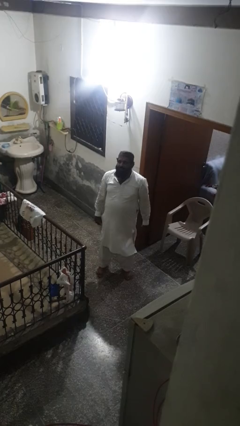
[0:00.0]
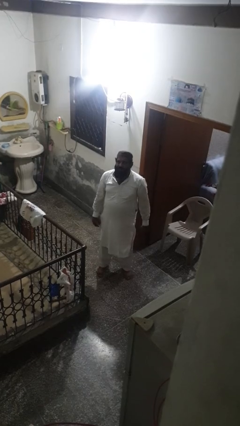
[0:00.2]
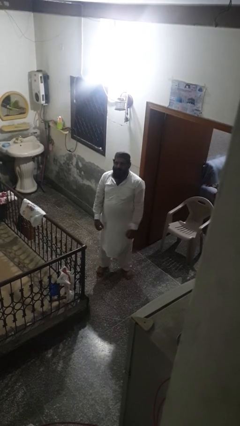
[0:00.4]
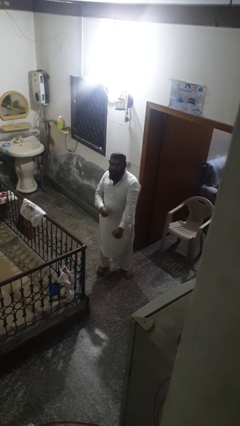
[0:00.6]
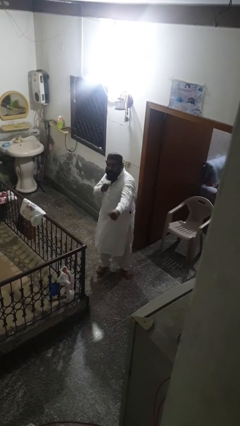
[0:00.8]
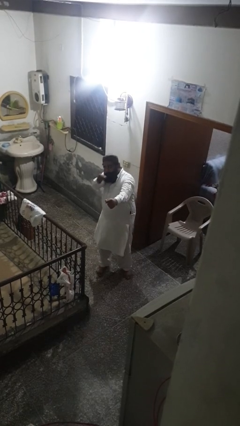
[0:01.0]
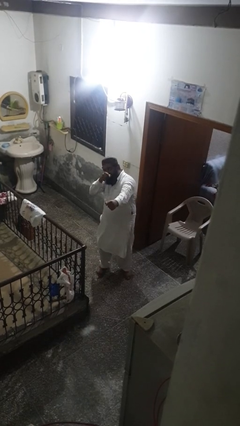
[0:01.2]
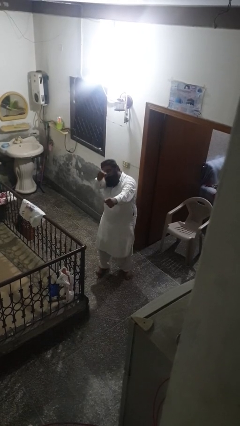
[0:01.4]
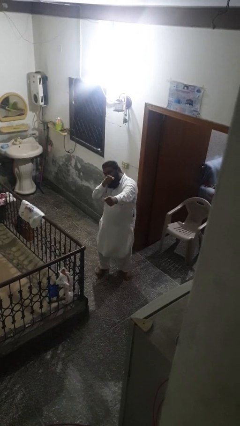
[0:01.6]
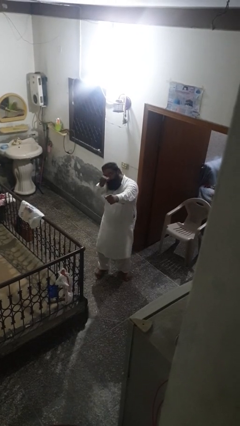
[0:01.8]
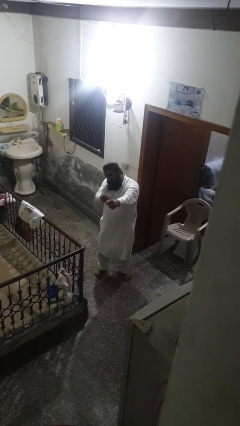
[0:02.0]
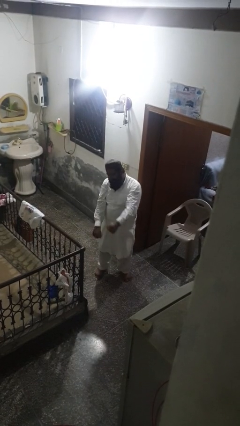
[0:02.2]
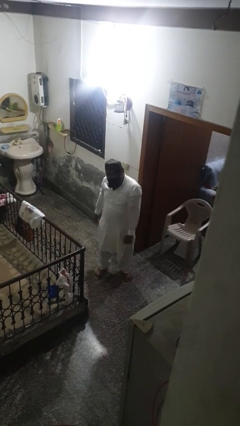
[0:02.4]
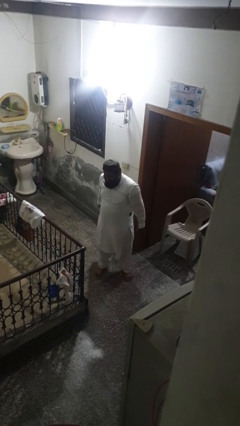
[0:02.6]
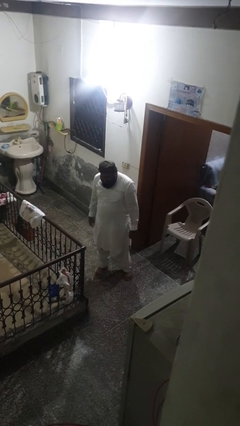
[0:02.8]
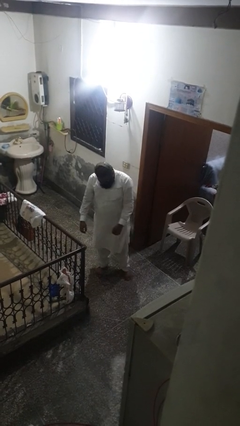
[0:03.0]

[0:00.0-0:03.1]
person punches

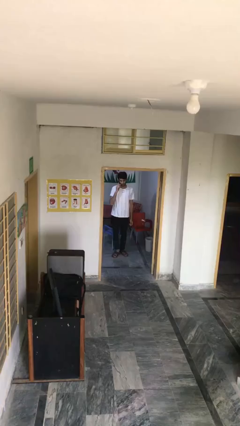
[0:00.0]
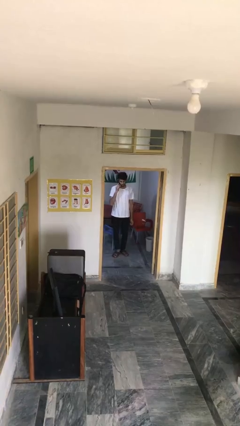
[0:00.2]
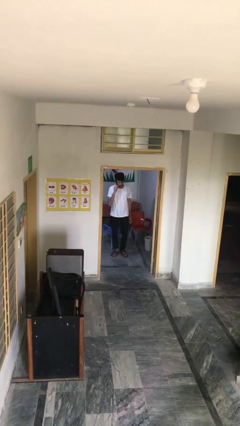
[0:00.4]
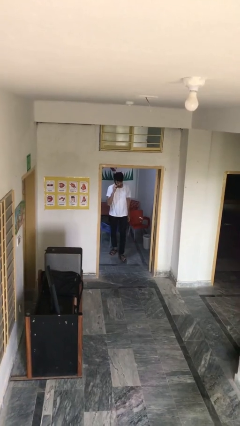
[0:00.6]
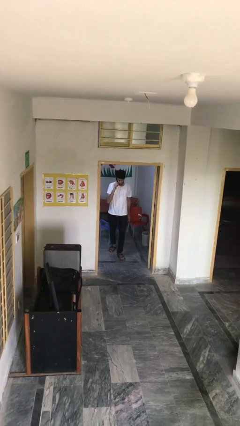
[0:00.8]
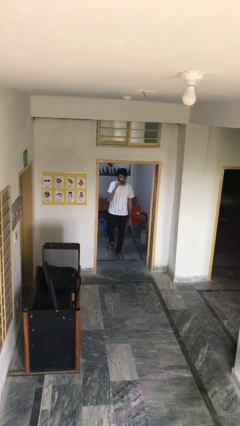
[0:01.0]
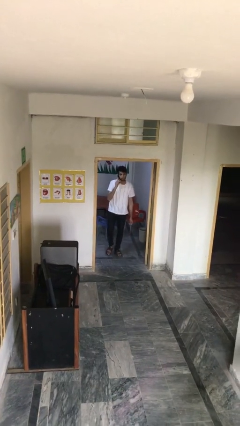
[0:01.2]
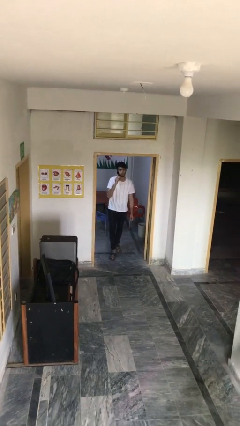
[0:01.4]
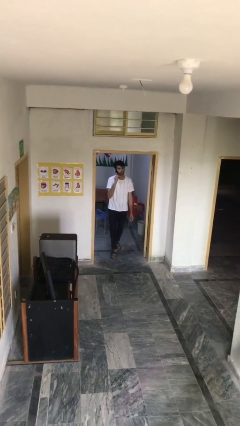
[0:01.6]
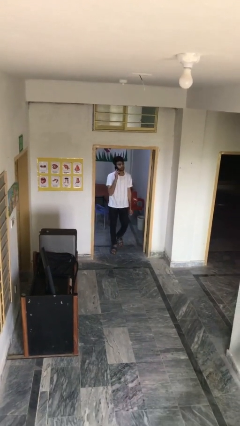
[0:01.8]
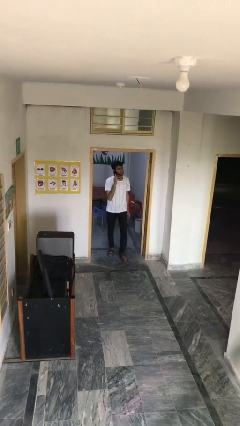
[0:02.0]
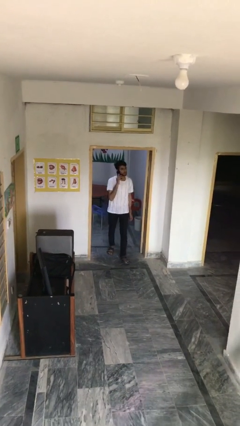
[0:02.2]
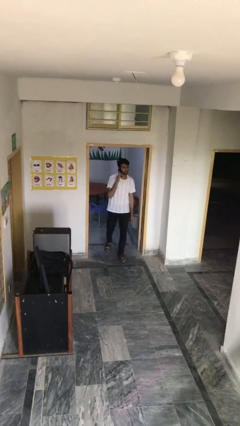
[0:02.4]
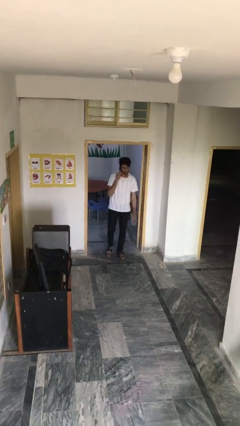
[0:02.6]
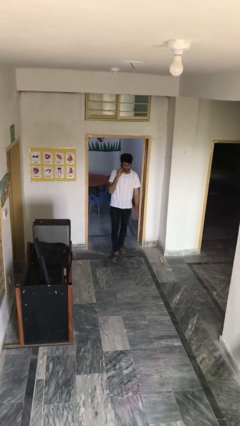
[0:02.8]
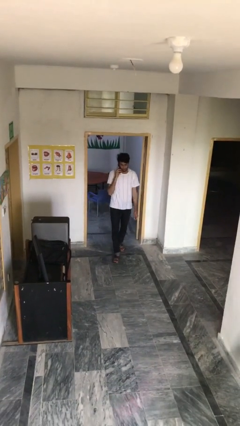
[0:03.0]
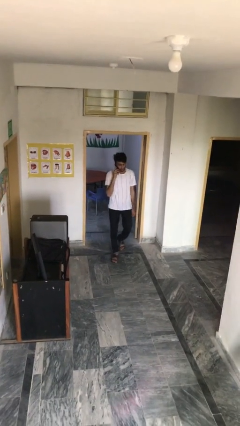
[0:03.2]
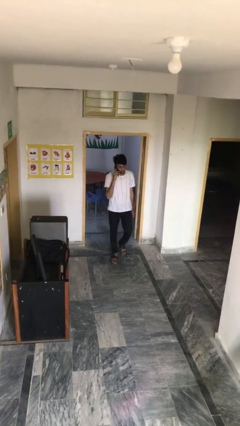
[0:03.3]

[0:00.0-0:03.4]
person enters scene through structure

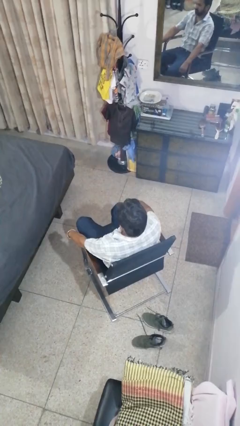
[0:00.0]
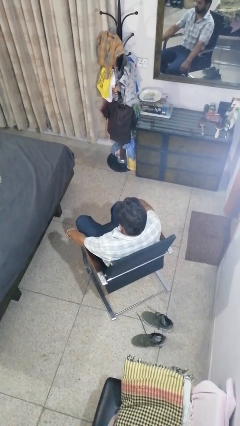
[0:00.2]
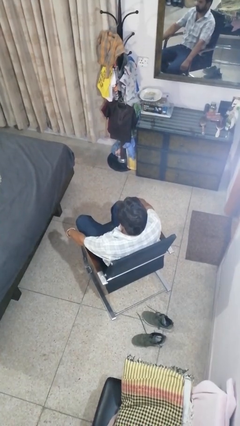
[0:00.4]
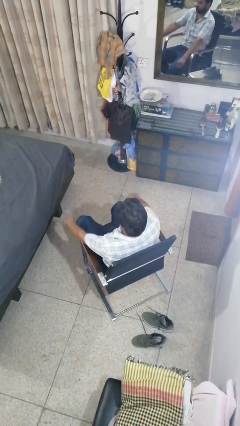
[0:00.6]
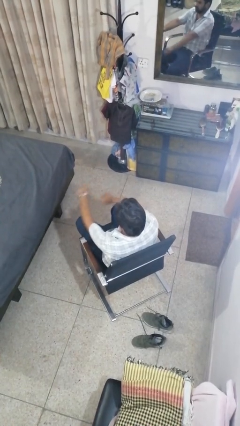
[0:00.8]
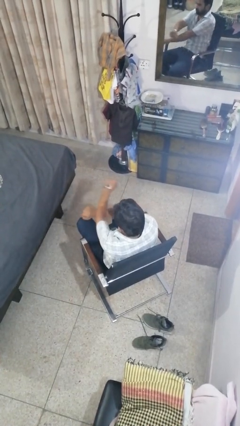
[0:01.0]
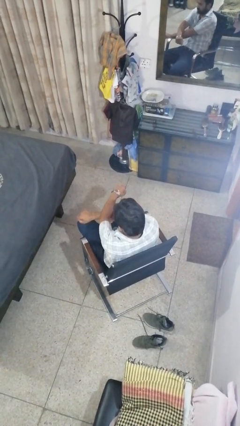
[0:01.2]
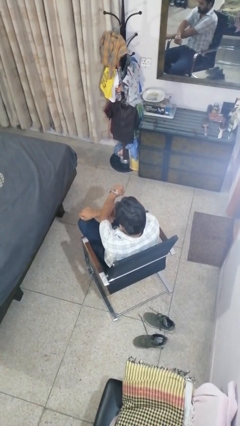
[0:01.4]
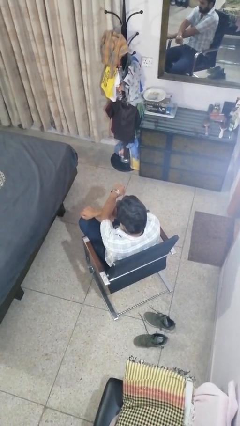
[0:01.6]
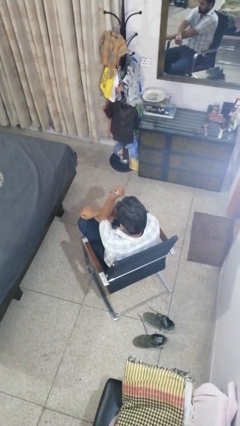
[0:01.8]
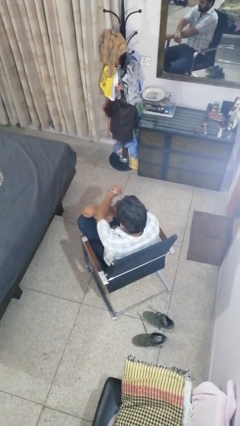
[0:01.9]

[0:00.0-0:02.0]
person gestures arms x

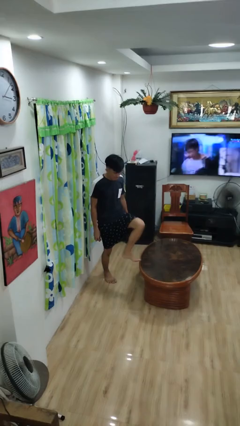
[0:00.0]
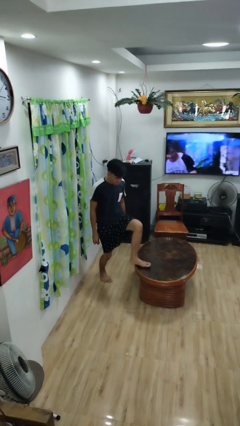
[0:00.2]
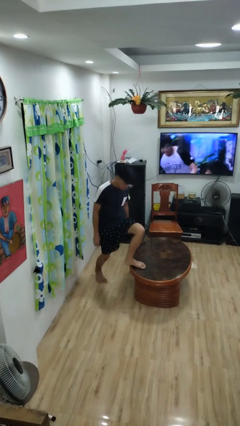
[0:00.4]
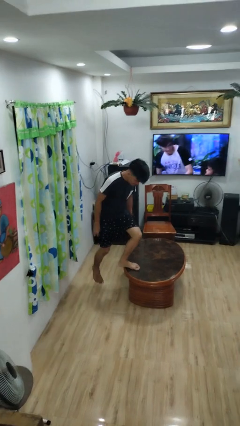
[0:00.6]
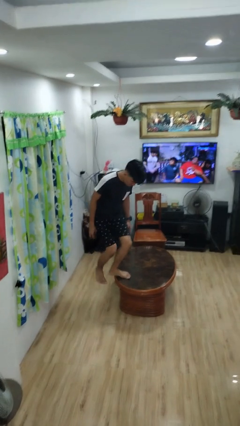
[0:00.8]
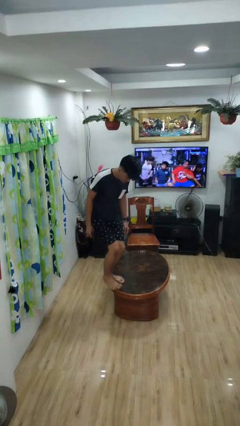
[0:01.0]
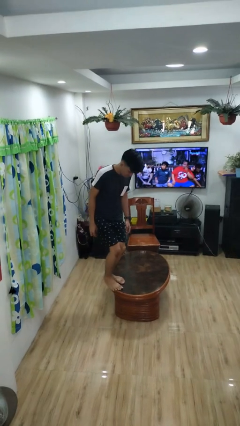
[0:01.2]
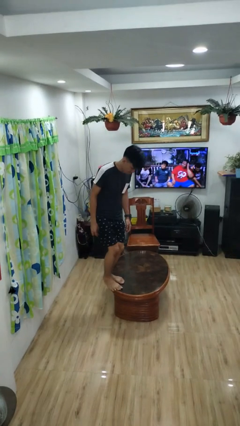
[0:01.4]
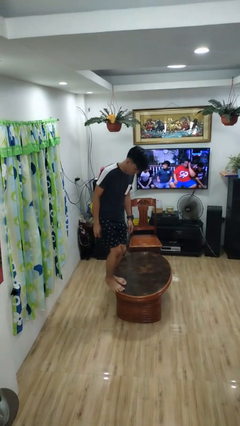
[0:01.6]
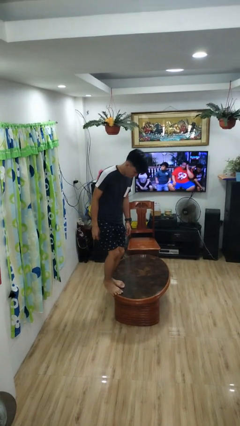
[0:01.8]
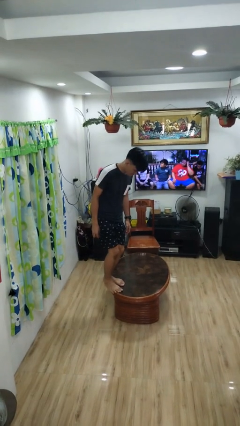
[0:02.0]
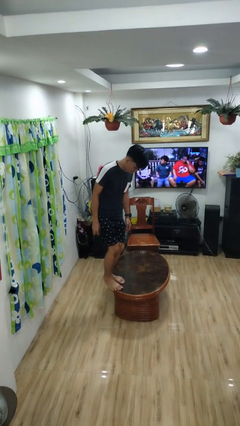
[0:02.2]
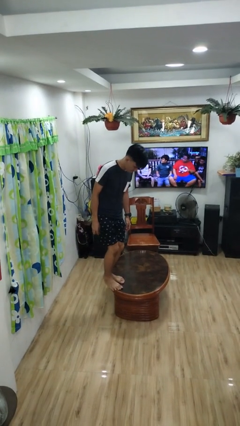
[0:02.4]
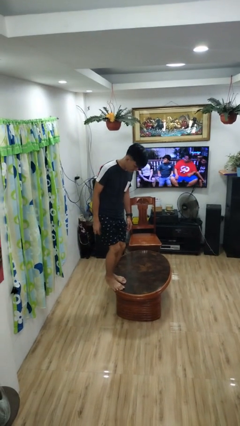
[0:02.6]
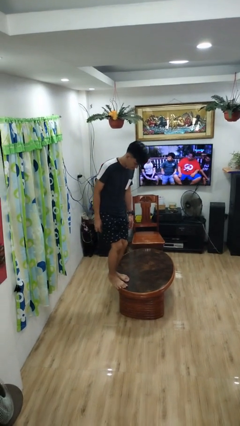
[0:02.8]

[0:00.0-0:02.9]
person climbs on table

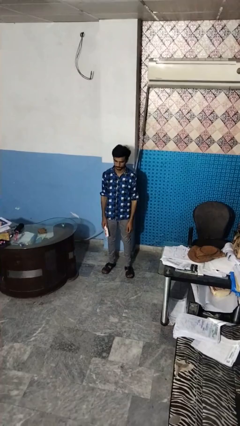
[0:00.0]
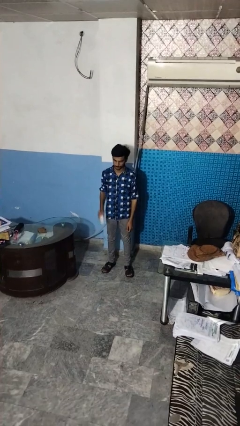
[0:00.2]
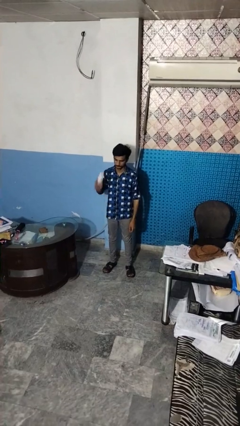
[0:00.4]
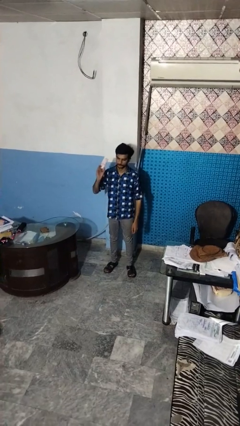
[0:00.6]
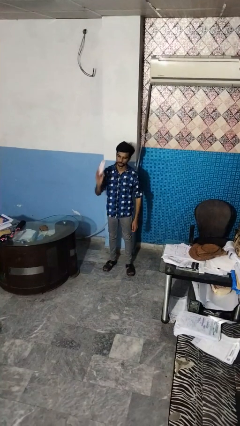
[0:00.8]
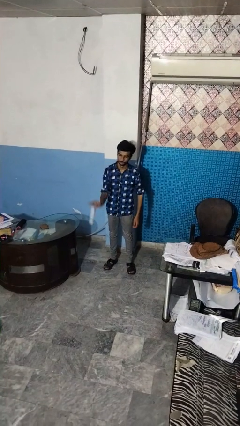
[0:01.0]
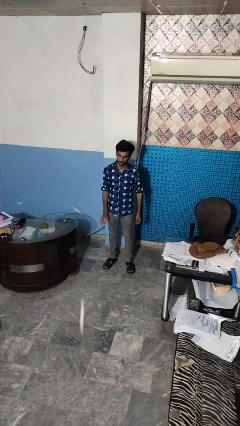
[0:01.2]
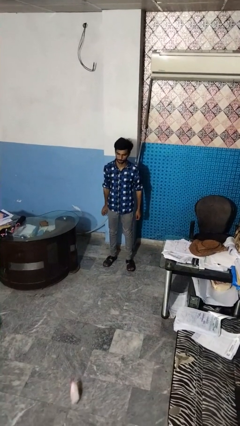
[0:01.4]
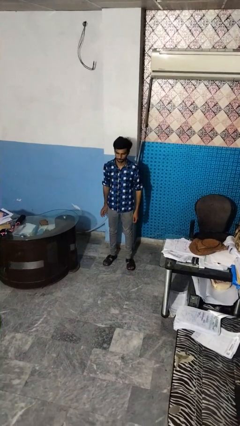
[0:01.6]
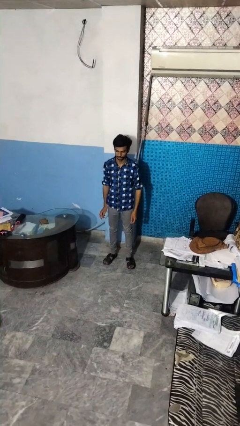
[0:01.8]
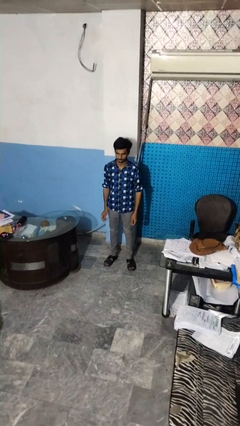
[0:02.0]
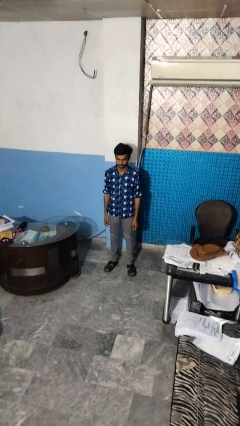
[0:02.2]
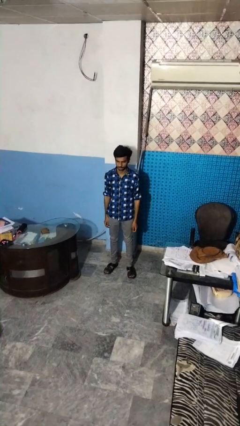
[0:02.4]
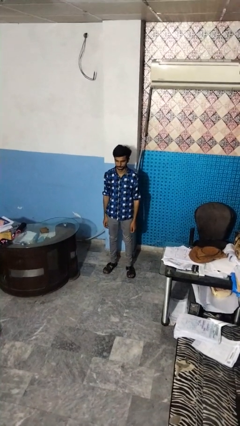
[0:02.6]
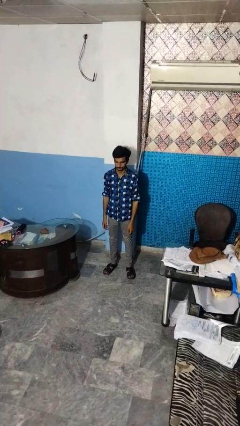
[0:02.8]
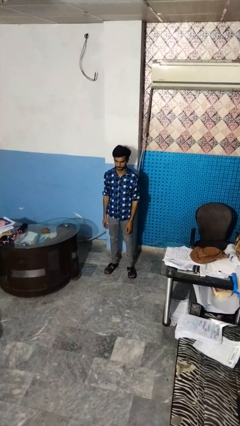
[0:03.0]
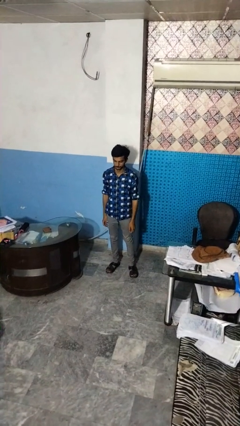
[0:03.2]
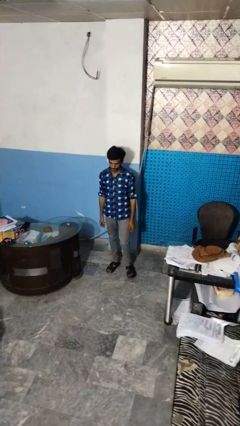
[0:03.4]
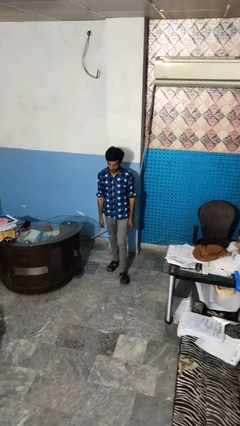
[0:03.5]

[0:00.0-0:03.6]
person throws object to ground

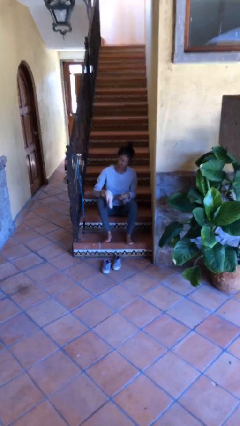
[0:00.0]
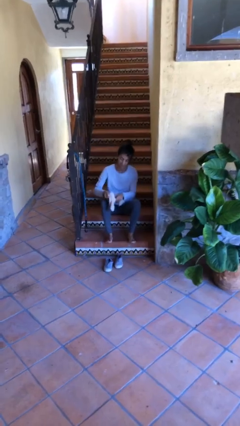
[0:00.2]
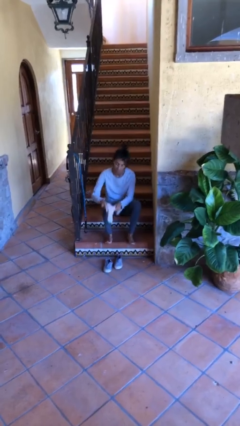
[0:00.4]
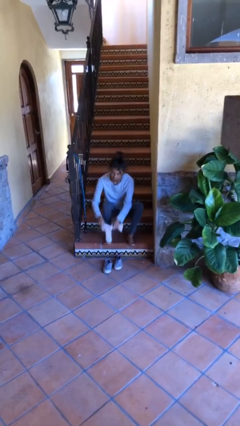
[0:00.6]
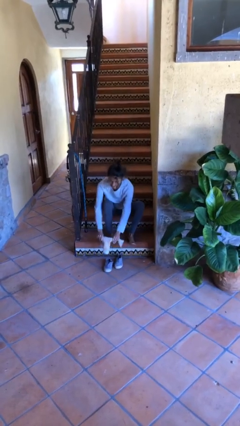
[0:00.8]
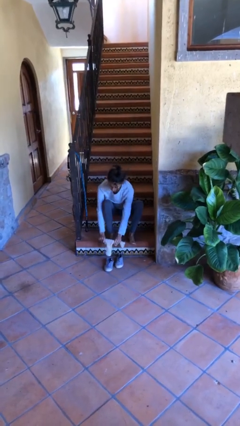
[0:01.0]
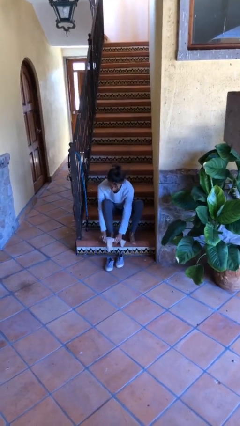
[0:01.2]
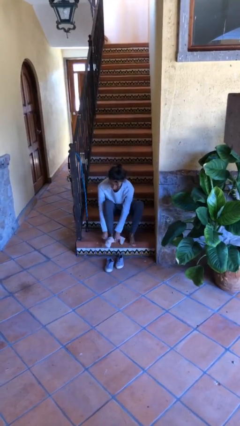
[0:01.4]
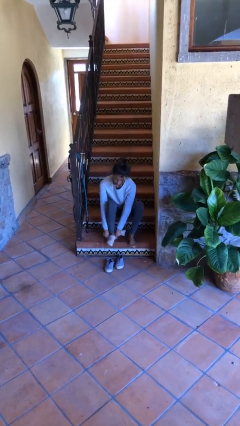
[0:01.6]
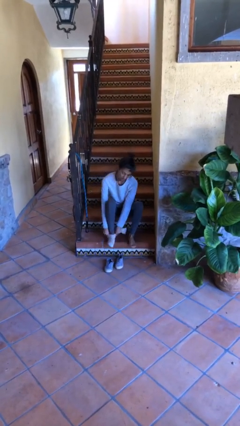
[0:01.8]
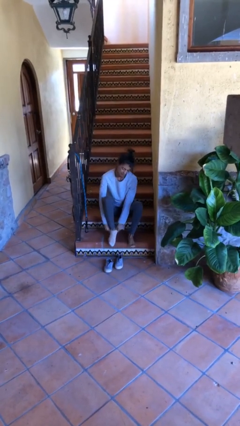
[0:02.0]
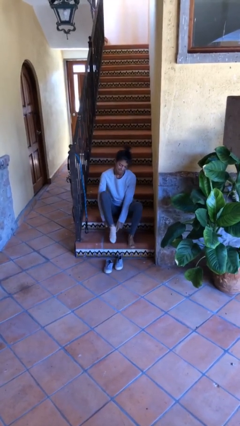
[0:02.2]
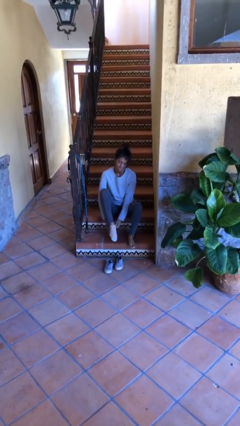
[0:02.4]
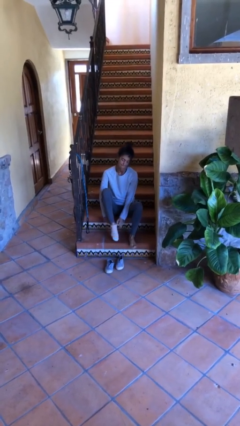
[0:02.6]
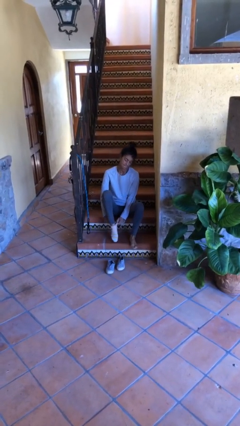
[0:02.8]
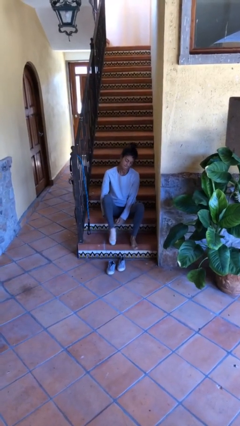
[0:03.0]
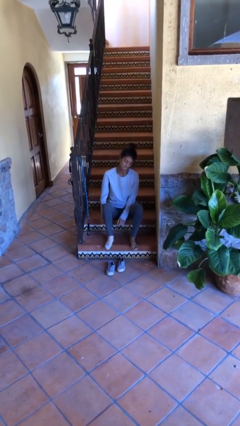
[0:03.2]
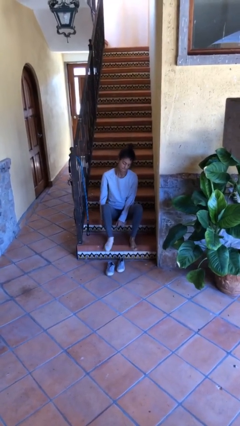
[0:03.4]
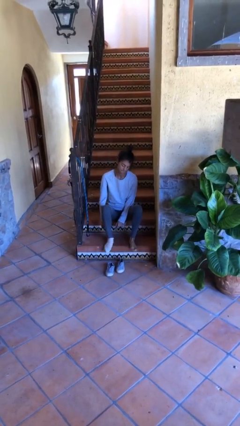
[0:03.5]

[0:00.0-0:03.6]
person puts on socks
